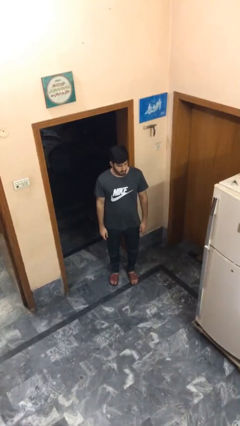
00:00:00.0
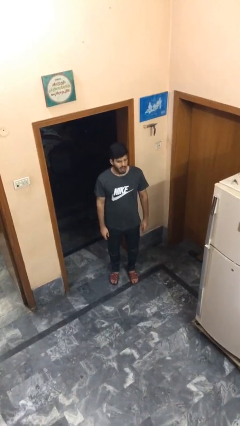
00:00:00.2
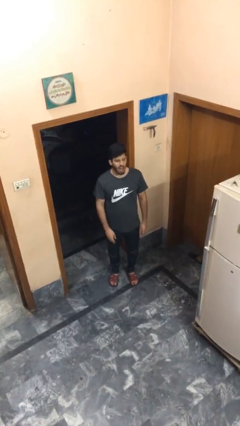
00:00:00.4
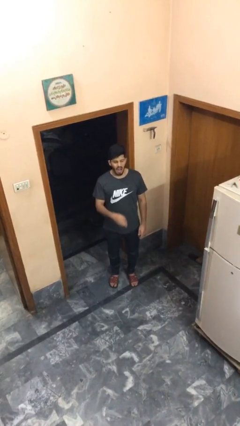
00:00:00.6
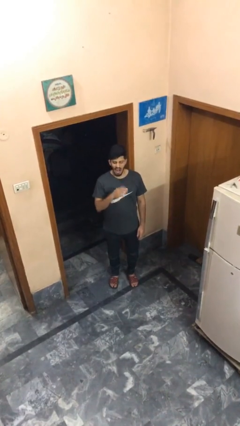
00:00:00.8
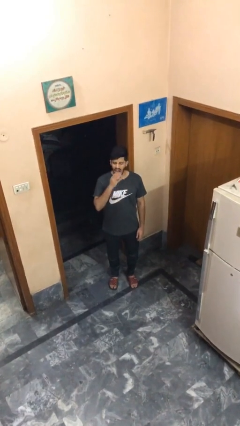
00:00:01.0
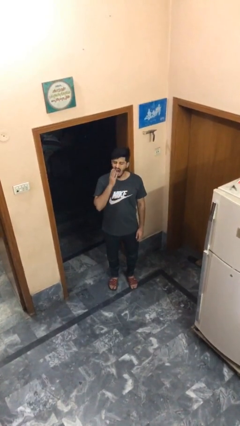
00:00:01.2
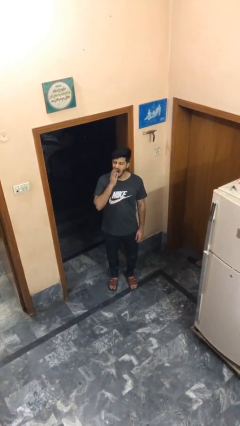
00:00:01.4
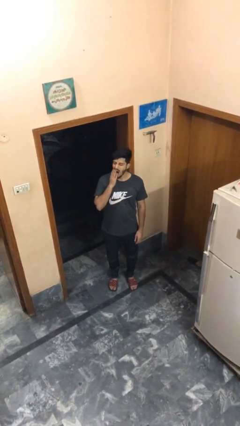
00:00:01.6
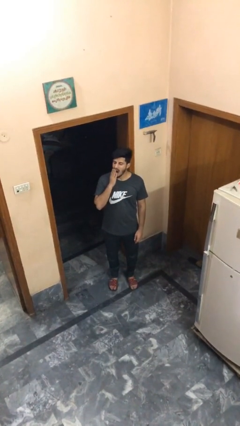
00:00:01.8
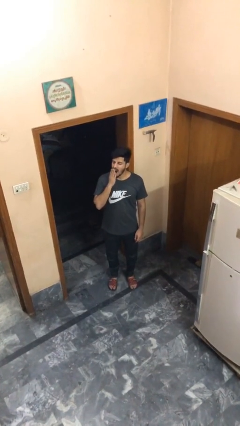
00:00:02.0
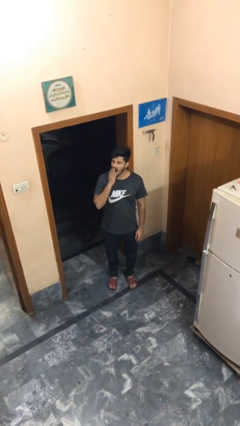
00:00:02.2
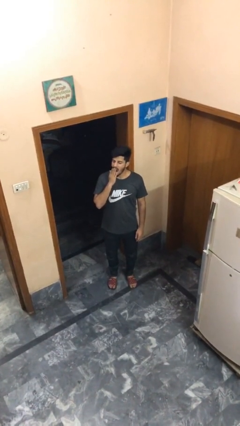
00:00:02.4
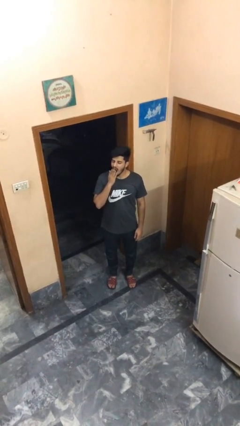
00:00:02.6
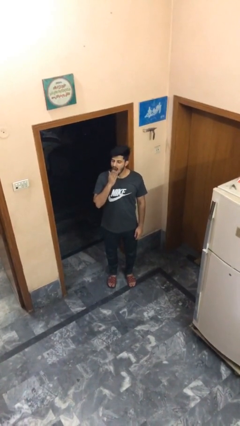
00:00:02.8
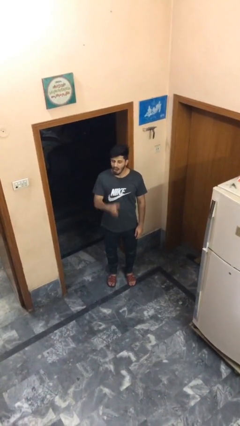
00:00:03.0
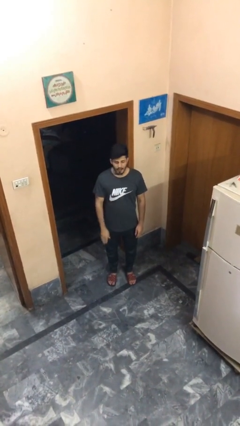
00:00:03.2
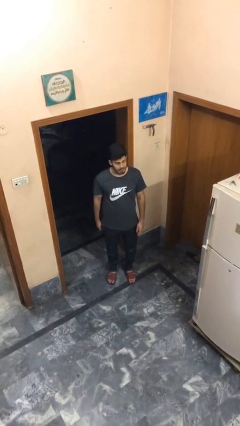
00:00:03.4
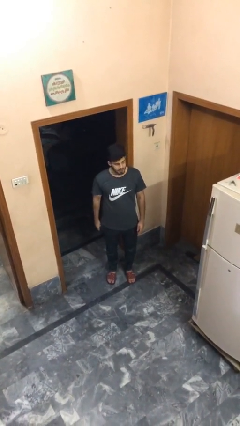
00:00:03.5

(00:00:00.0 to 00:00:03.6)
person yawns

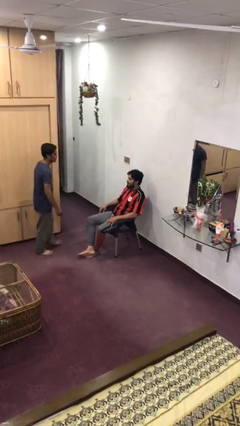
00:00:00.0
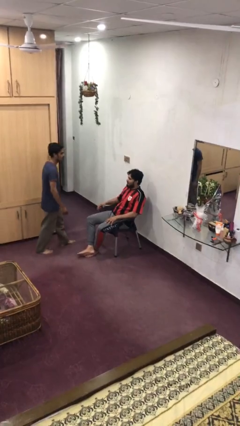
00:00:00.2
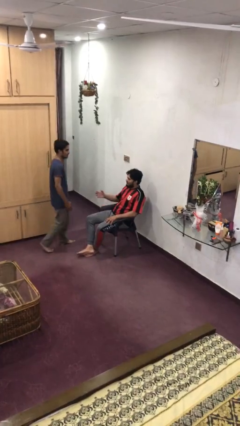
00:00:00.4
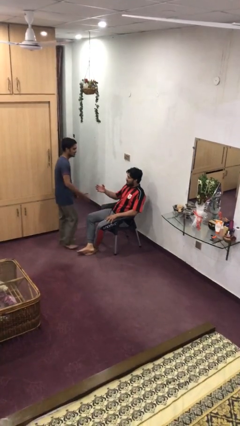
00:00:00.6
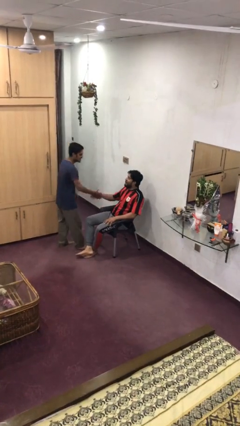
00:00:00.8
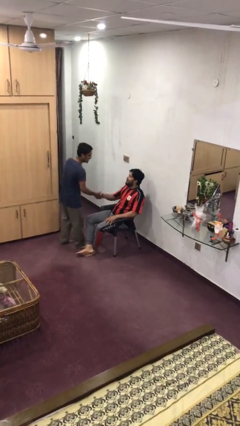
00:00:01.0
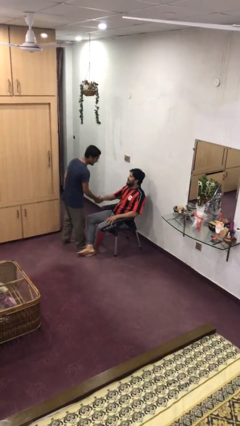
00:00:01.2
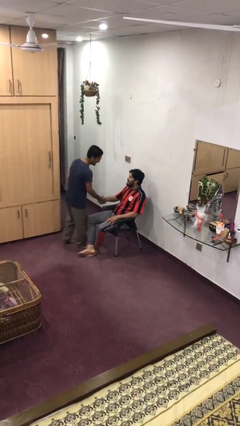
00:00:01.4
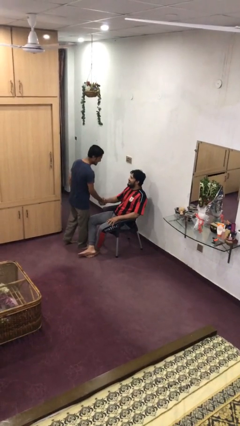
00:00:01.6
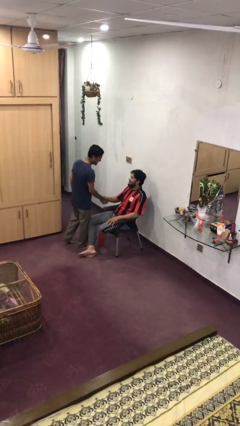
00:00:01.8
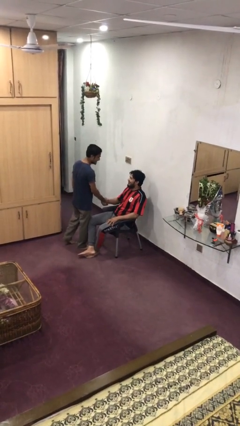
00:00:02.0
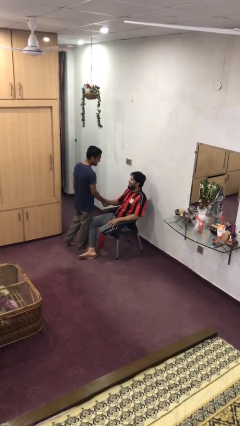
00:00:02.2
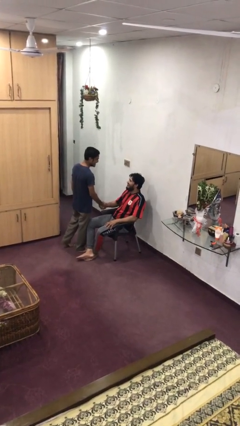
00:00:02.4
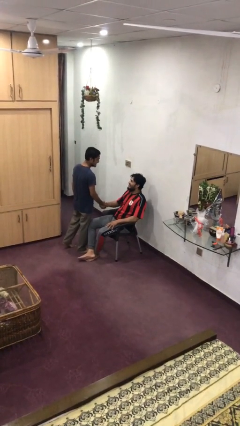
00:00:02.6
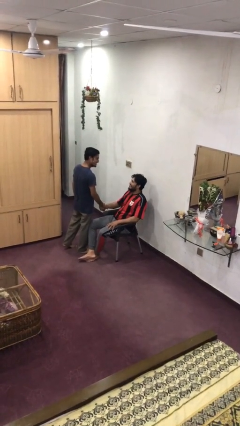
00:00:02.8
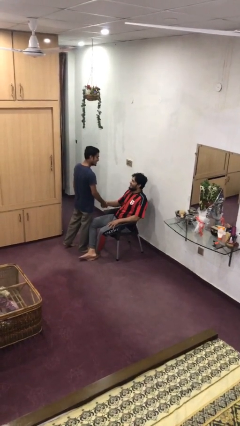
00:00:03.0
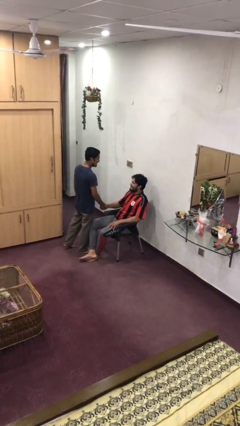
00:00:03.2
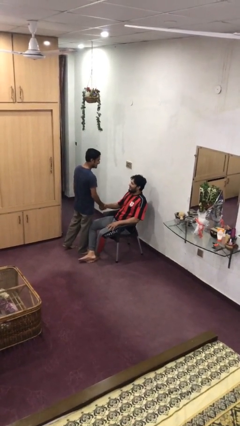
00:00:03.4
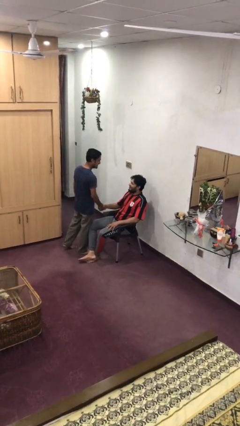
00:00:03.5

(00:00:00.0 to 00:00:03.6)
person shakes hand

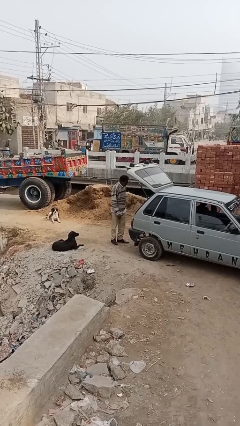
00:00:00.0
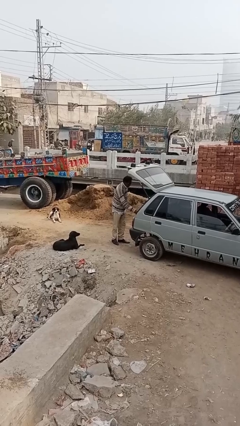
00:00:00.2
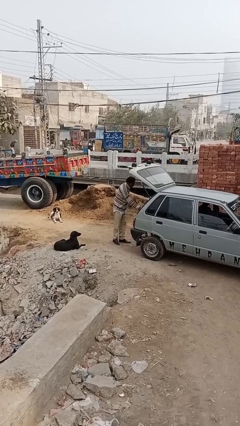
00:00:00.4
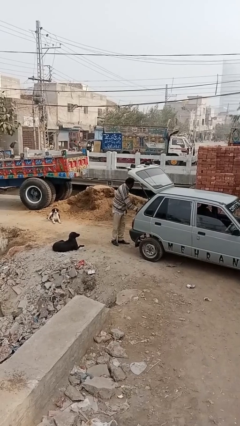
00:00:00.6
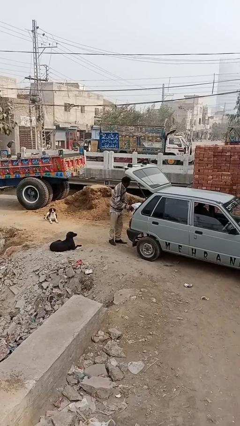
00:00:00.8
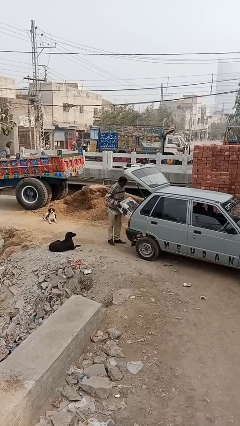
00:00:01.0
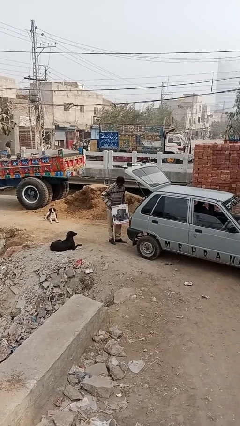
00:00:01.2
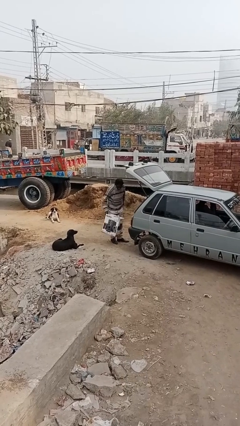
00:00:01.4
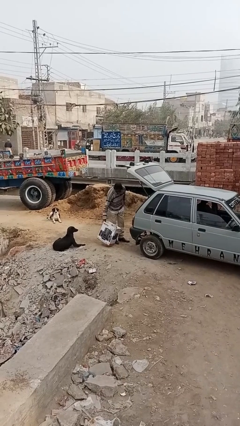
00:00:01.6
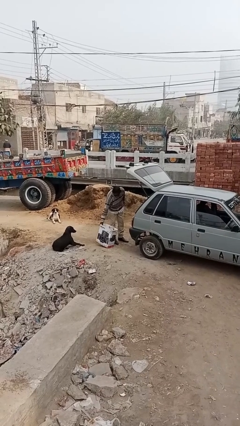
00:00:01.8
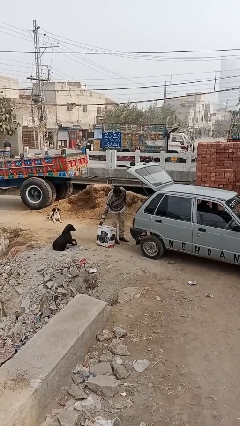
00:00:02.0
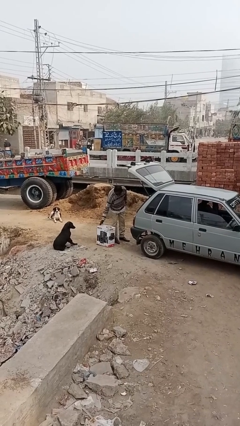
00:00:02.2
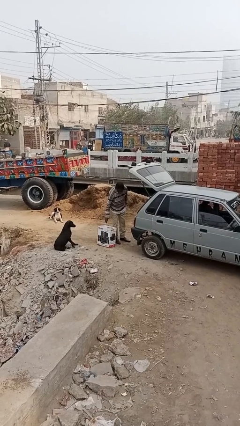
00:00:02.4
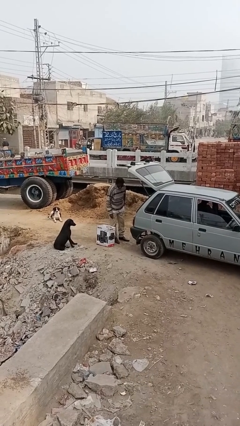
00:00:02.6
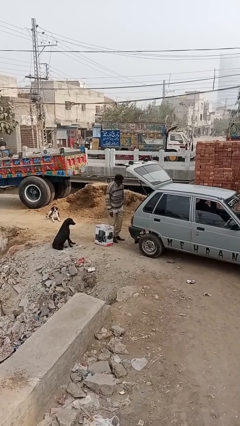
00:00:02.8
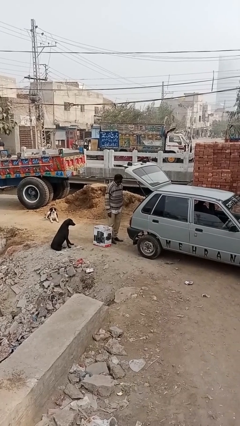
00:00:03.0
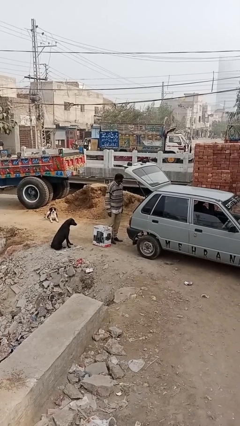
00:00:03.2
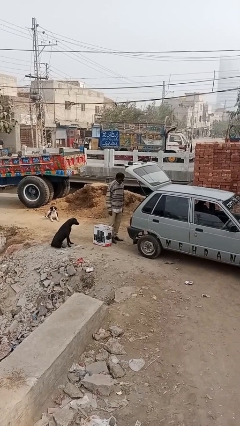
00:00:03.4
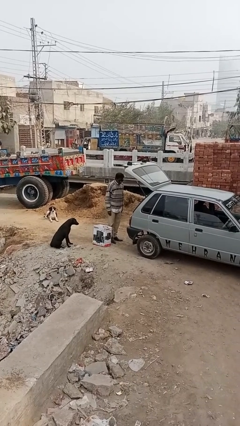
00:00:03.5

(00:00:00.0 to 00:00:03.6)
person unloads car

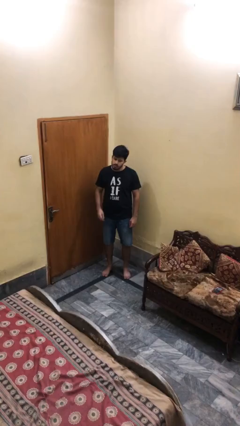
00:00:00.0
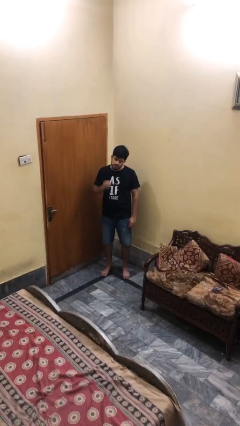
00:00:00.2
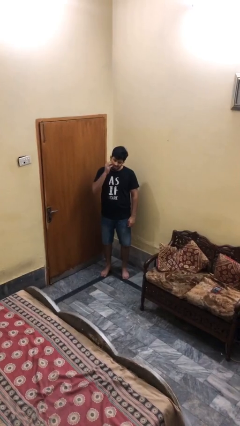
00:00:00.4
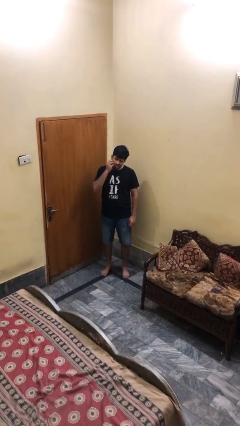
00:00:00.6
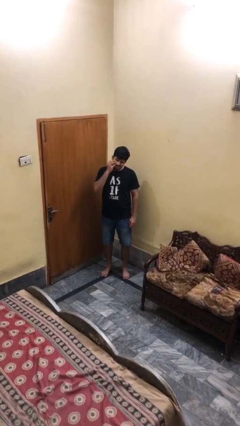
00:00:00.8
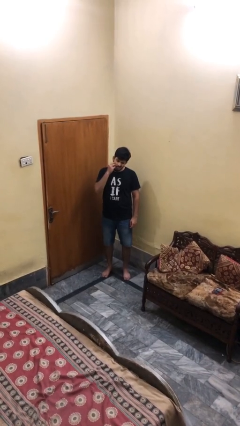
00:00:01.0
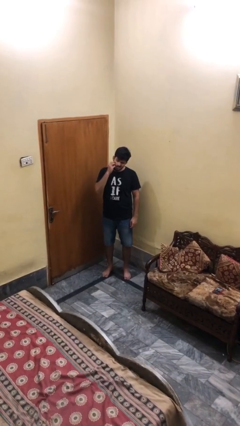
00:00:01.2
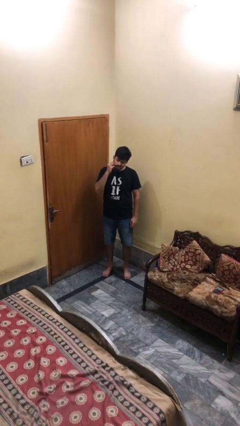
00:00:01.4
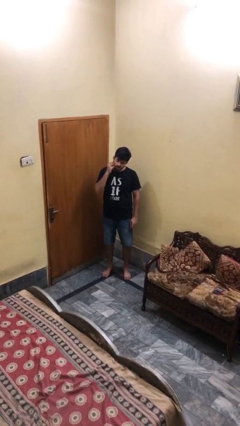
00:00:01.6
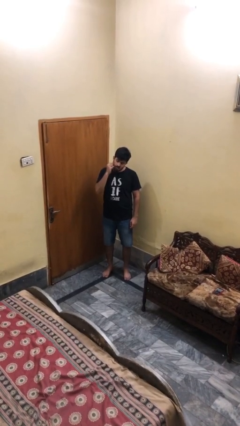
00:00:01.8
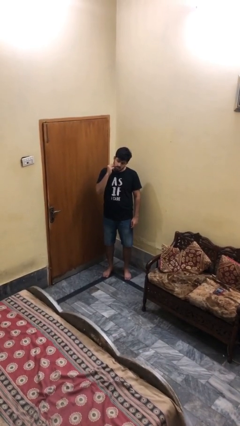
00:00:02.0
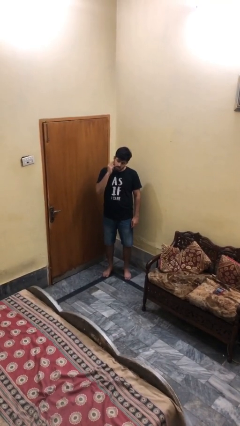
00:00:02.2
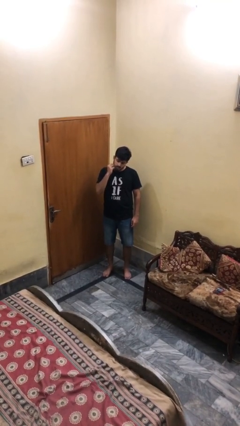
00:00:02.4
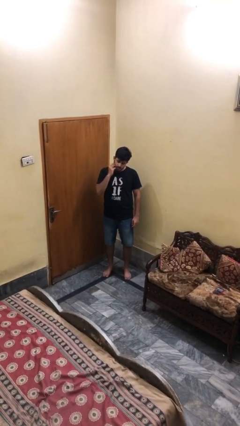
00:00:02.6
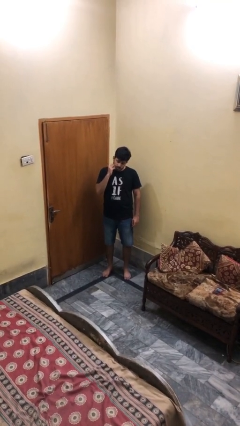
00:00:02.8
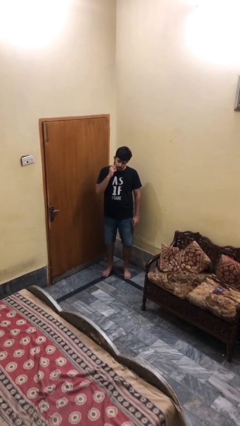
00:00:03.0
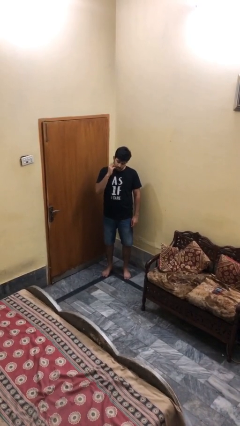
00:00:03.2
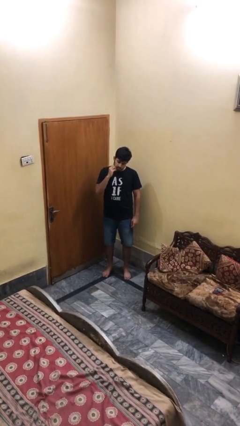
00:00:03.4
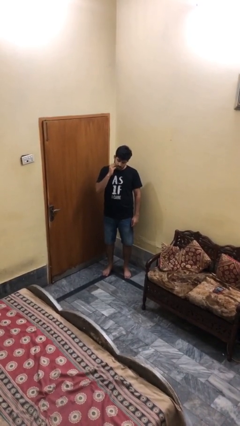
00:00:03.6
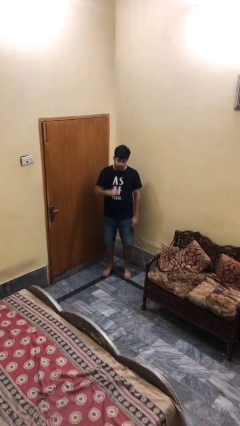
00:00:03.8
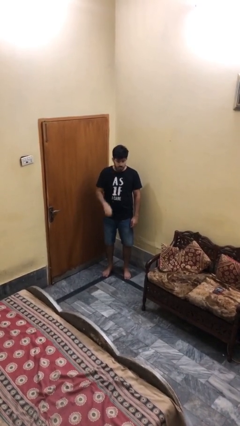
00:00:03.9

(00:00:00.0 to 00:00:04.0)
person scratches face

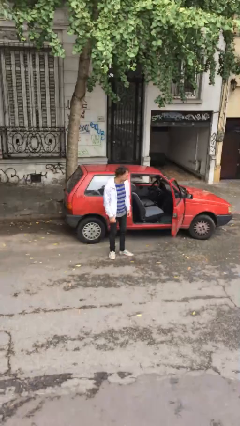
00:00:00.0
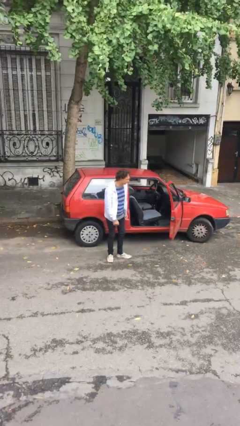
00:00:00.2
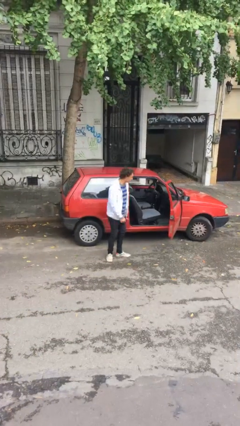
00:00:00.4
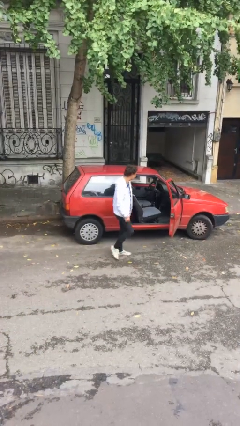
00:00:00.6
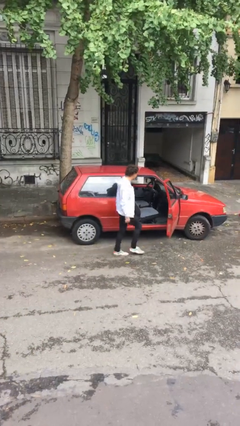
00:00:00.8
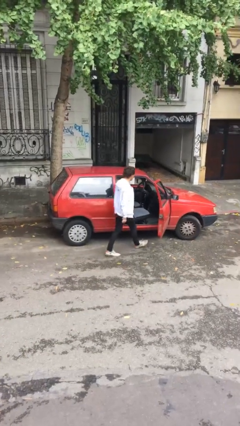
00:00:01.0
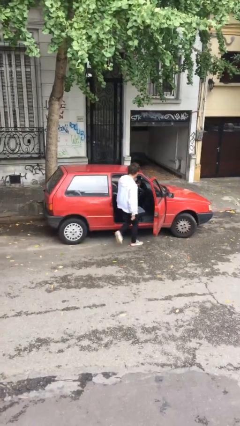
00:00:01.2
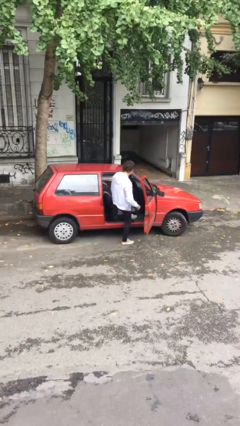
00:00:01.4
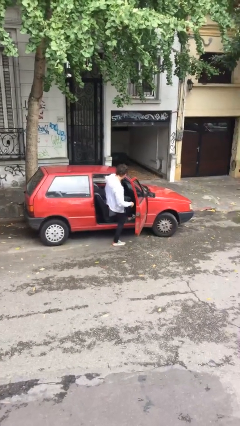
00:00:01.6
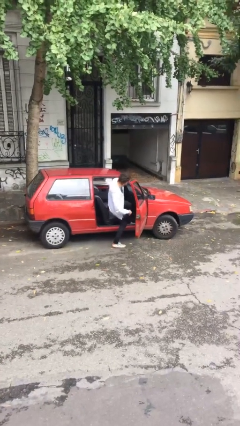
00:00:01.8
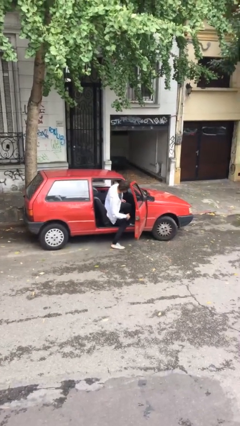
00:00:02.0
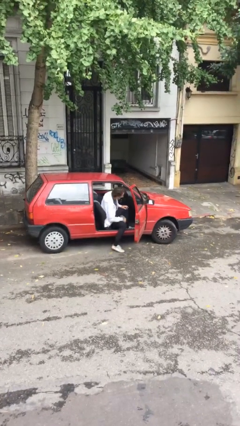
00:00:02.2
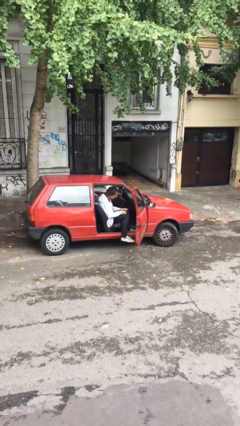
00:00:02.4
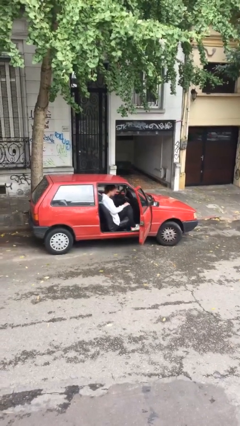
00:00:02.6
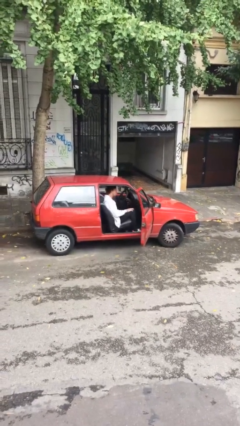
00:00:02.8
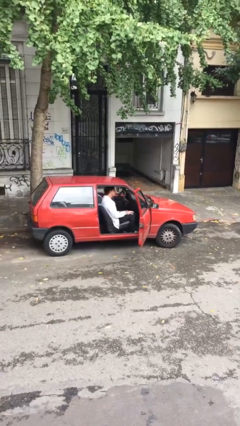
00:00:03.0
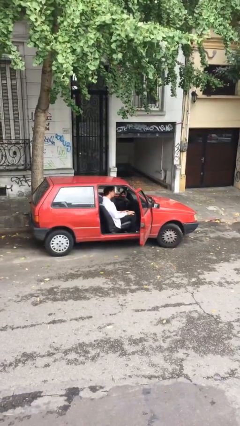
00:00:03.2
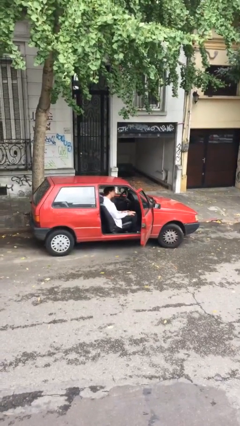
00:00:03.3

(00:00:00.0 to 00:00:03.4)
person enters car
